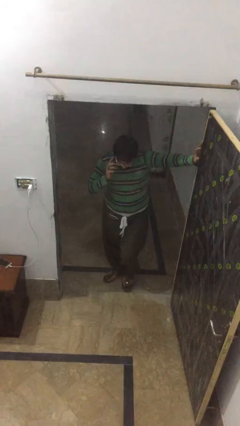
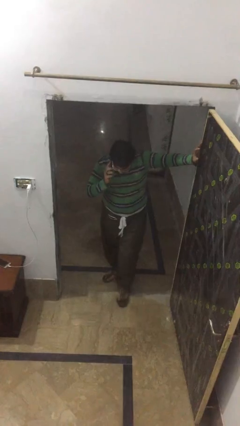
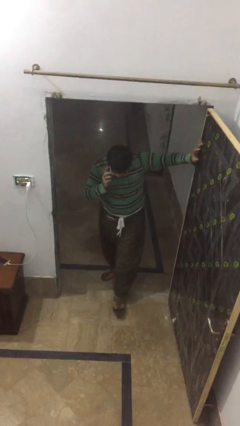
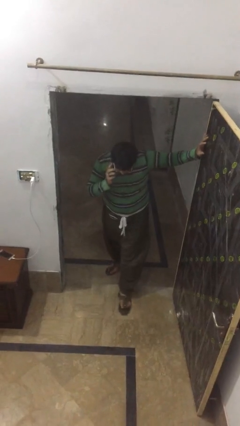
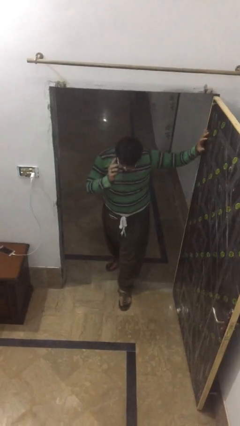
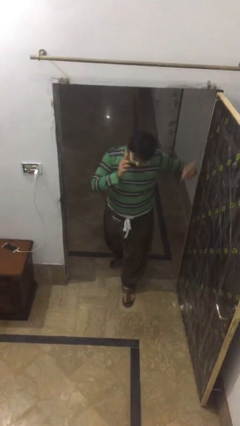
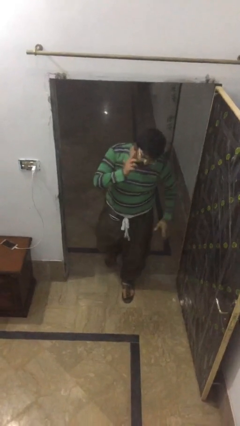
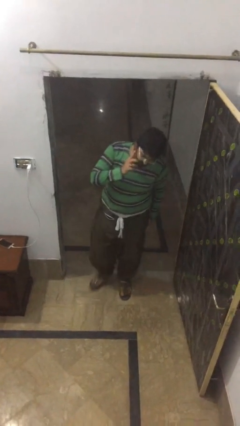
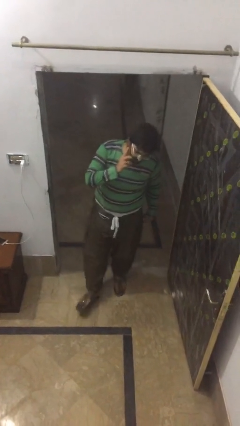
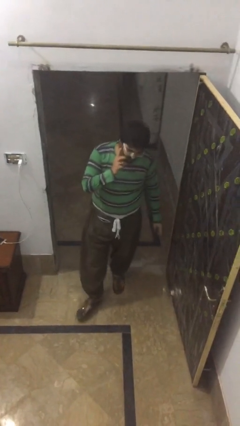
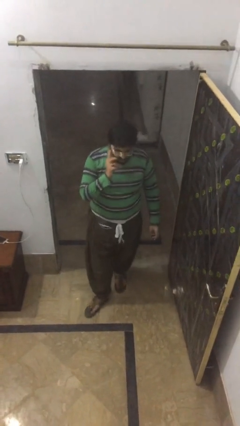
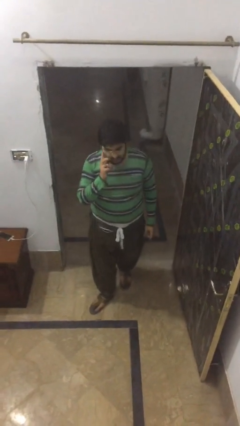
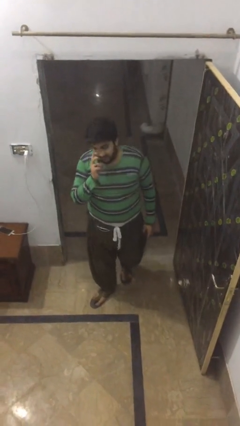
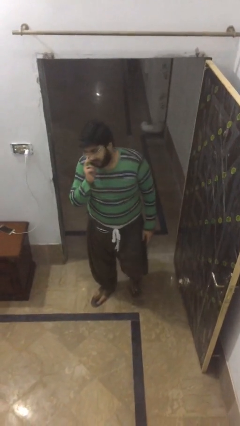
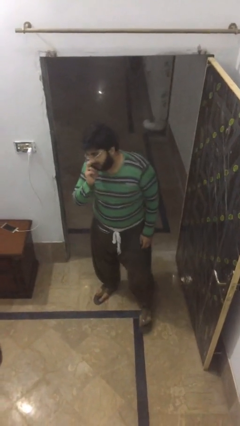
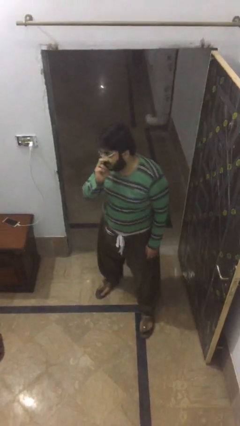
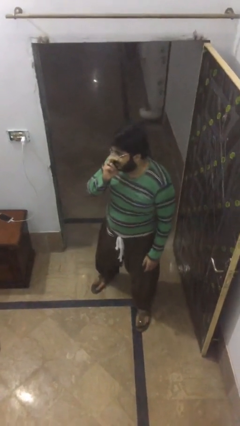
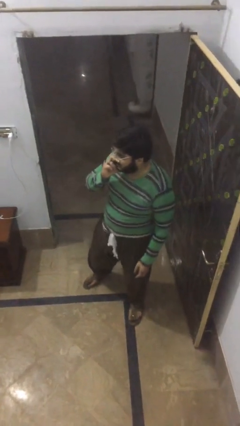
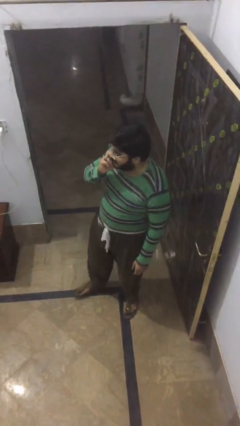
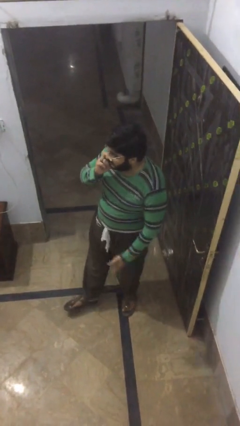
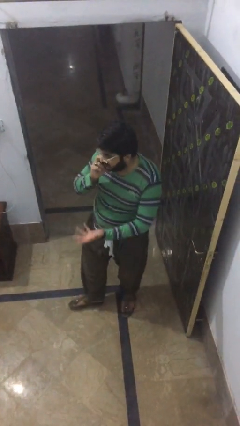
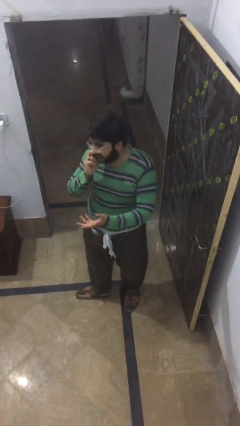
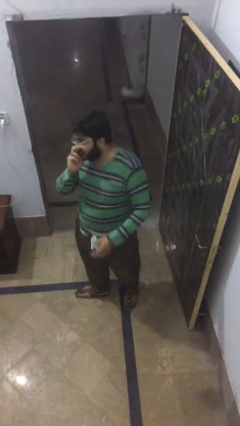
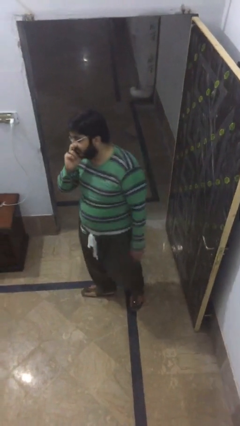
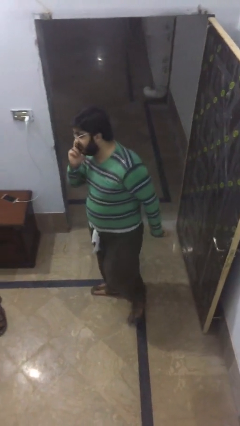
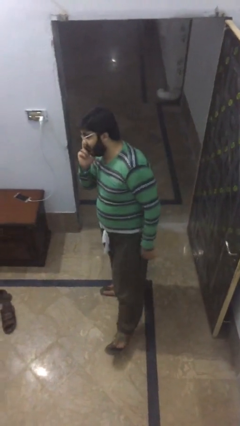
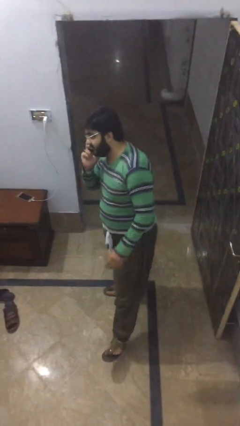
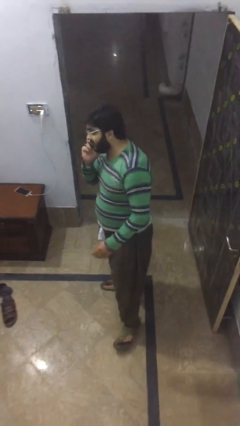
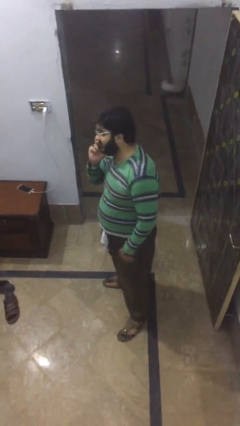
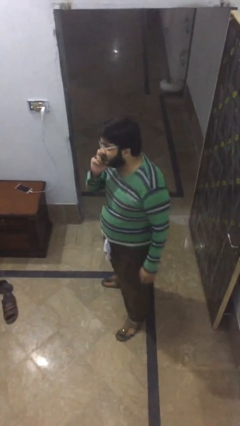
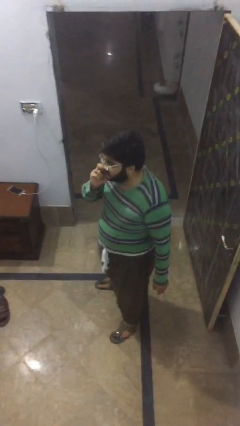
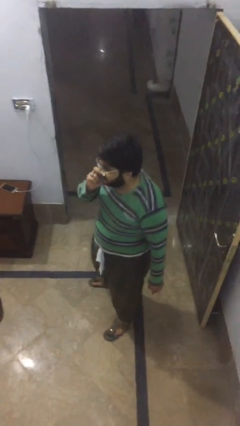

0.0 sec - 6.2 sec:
person enters scene through structure

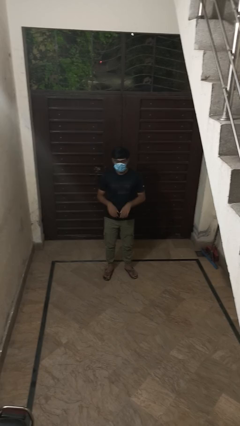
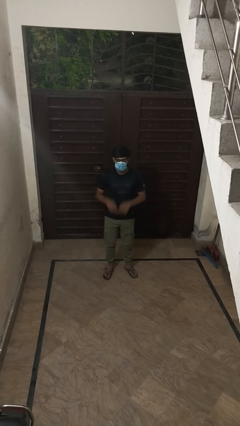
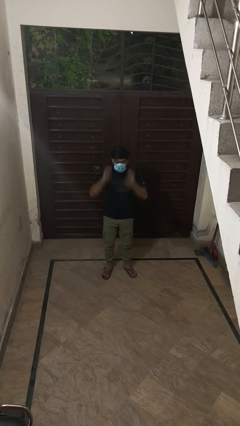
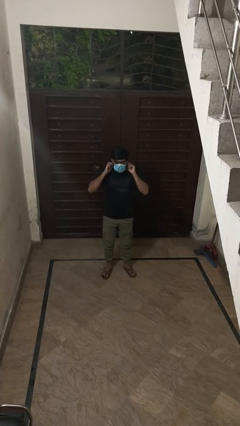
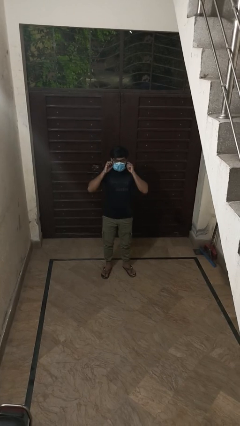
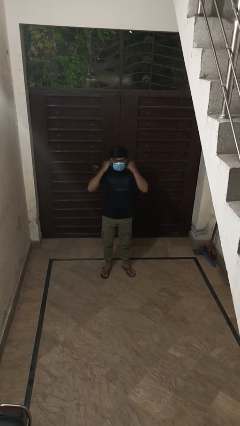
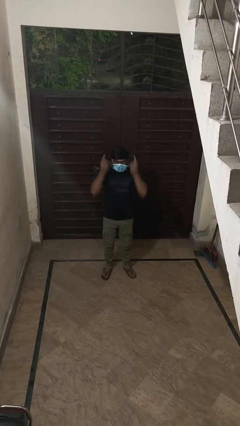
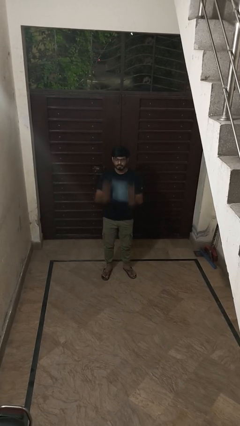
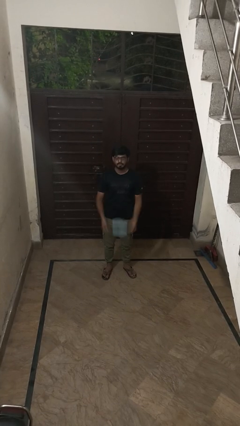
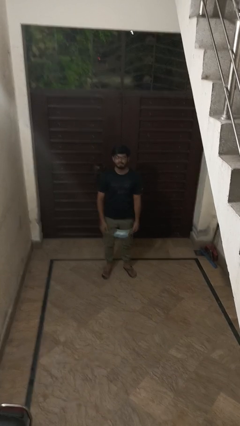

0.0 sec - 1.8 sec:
person takes off facemask

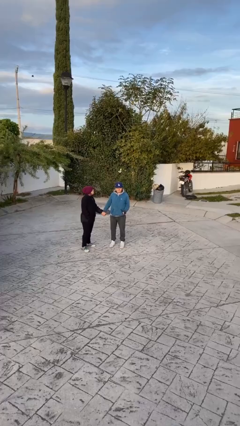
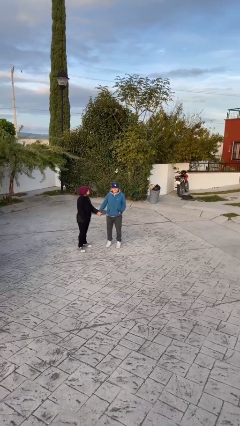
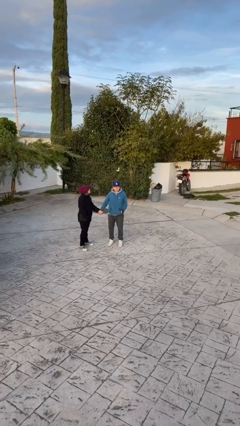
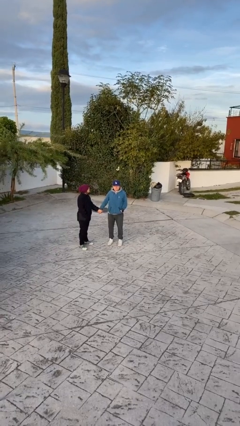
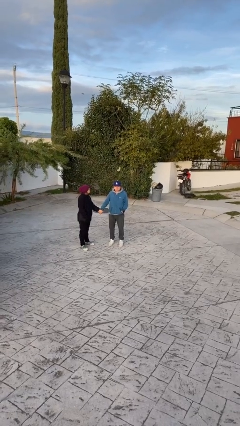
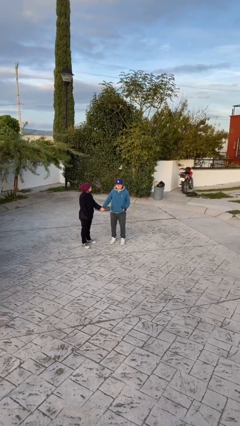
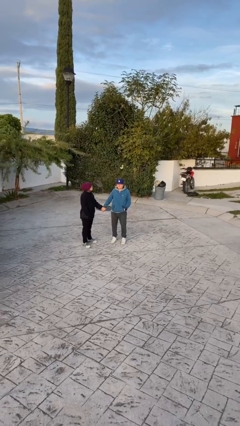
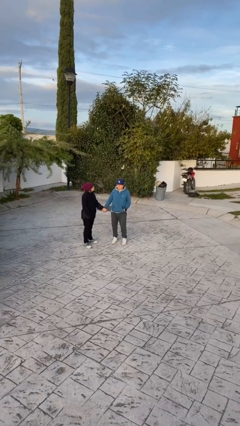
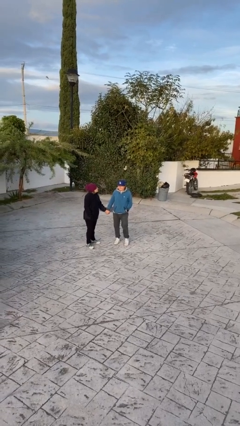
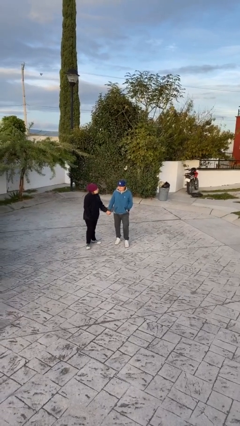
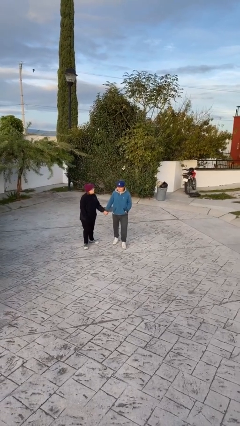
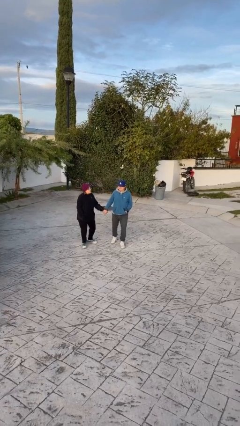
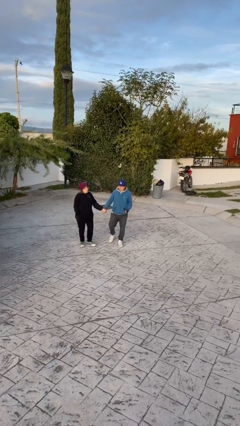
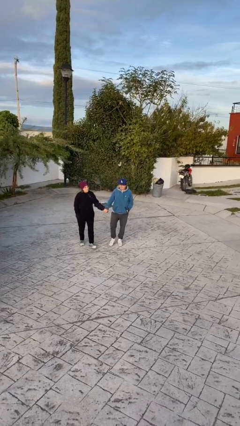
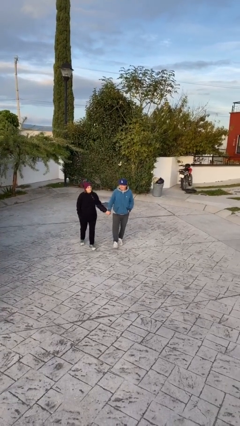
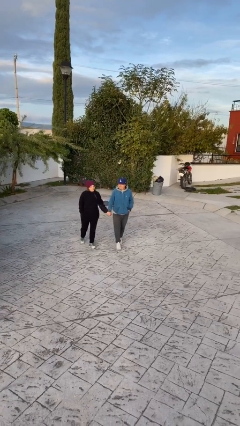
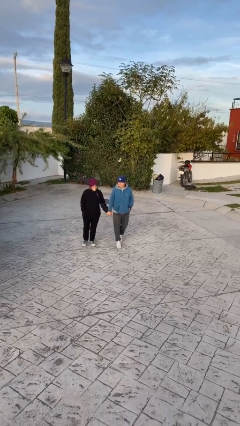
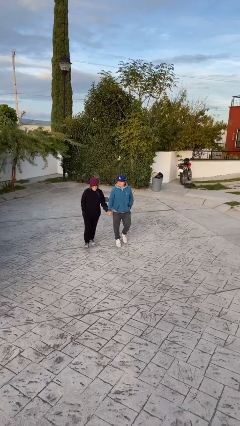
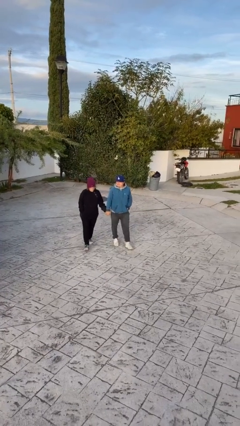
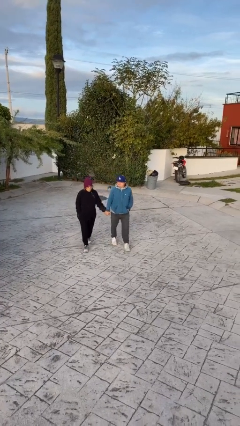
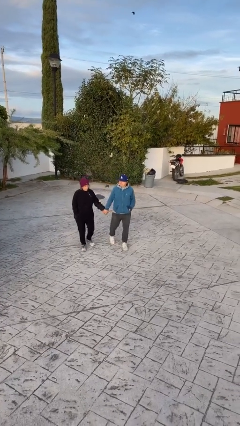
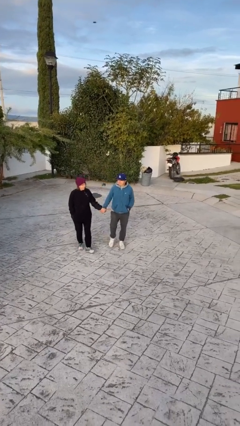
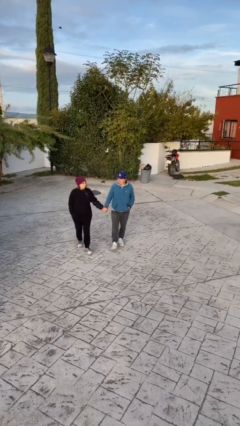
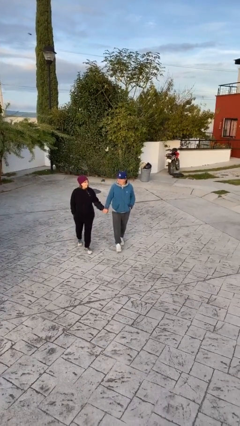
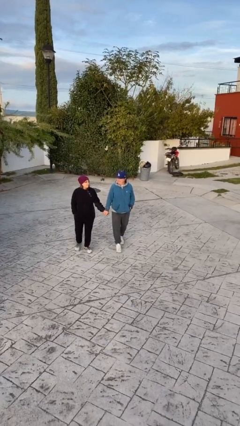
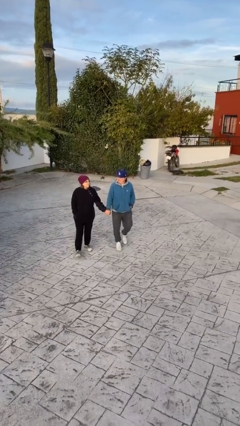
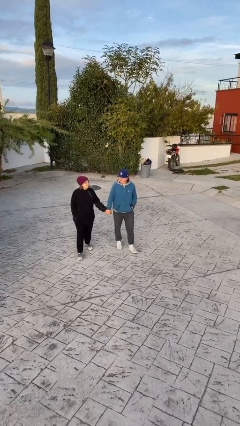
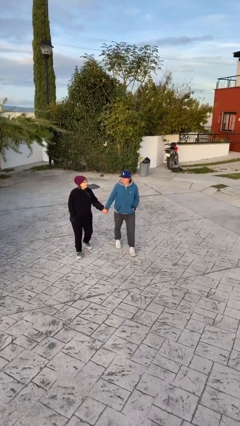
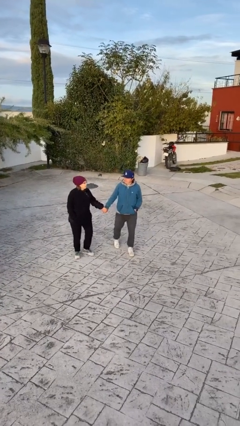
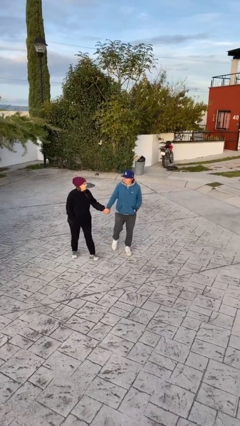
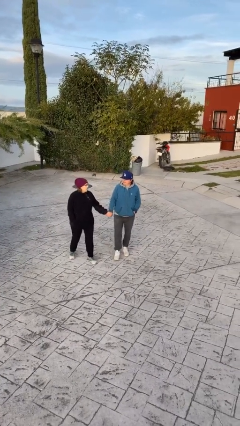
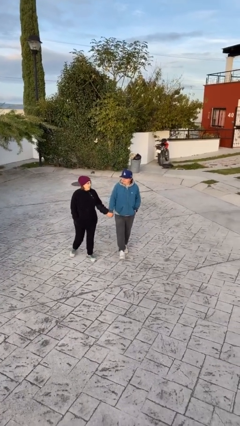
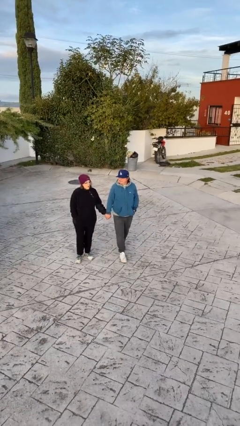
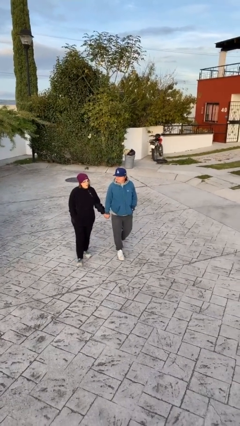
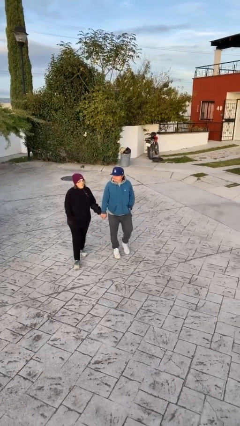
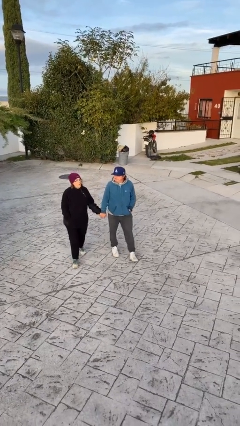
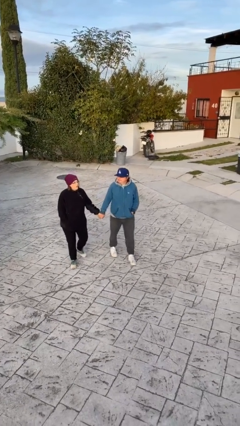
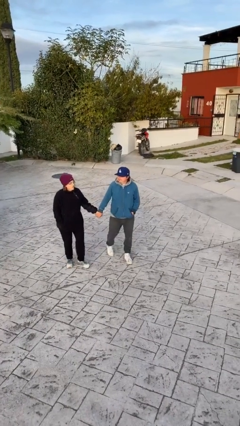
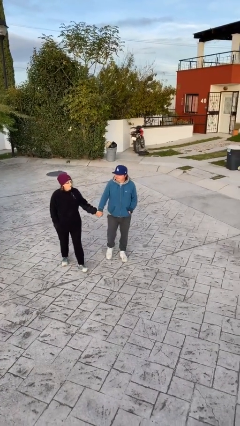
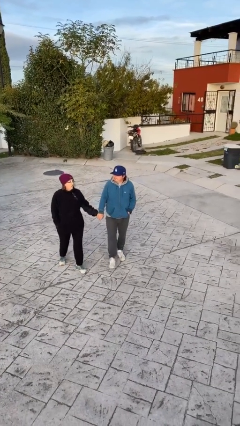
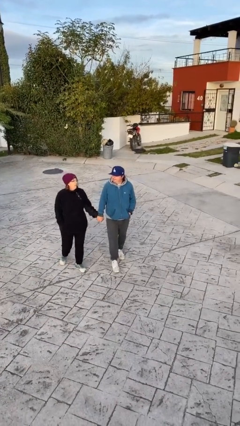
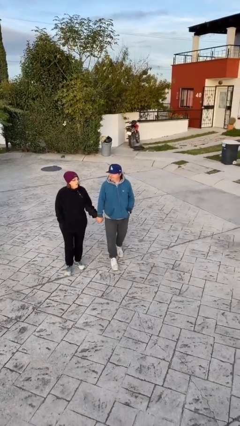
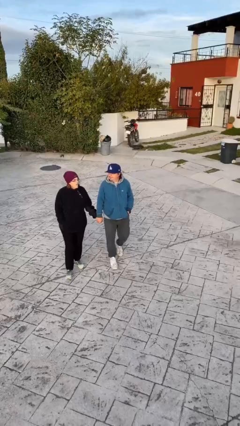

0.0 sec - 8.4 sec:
person holds hand

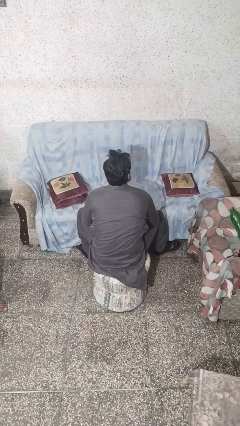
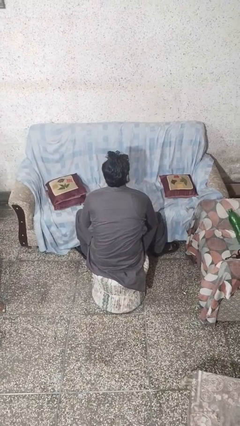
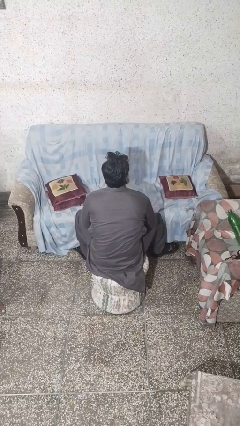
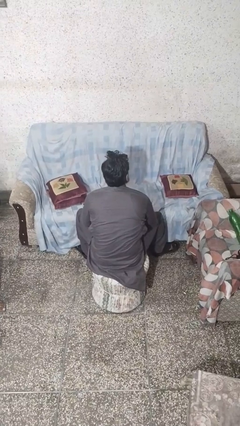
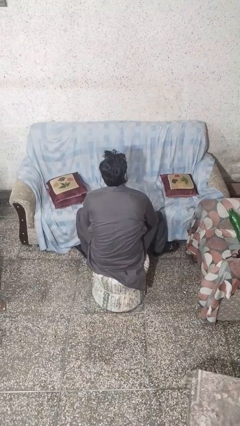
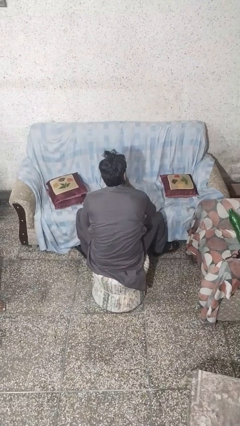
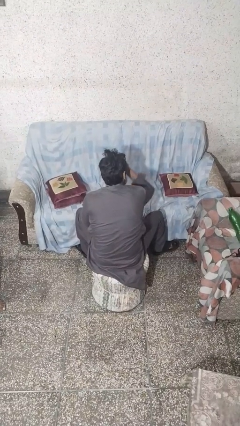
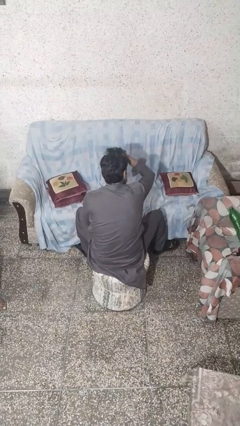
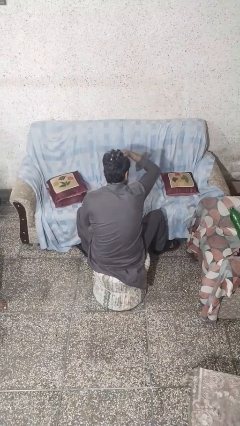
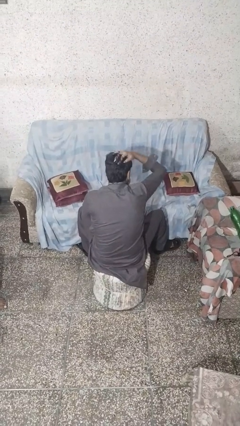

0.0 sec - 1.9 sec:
person strokes hair
